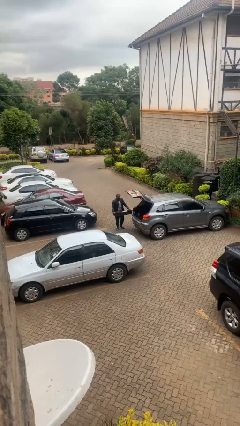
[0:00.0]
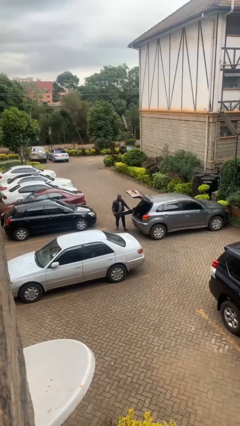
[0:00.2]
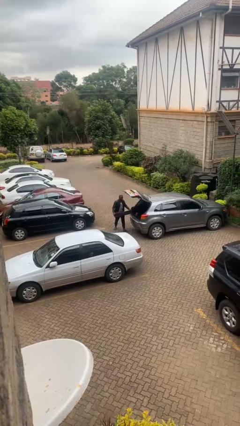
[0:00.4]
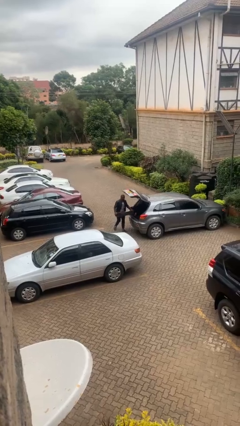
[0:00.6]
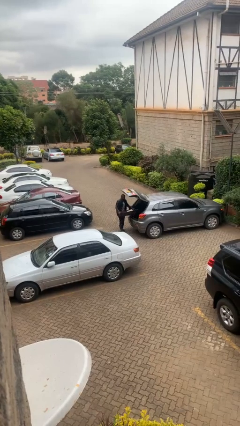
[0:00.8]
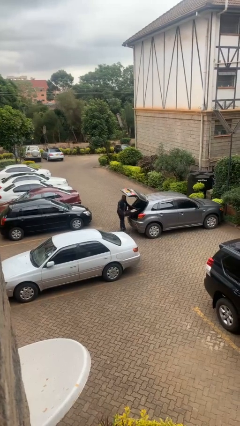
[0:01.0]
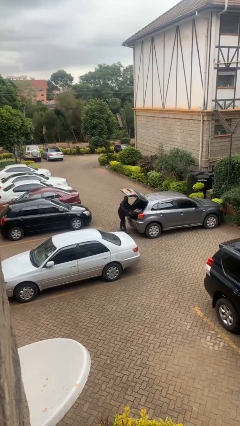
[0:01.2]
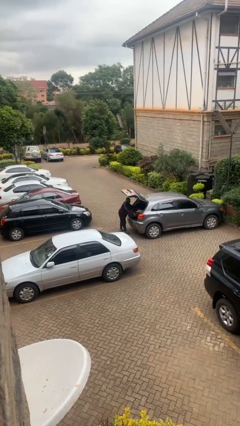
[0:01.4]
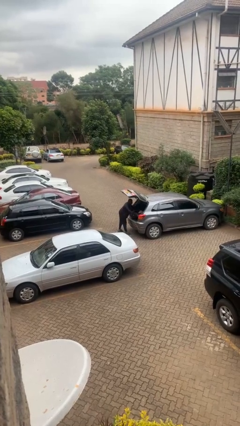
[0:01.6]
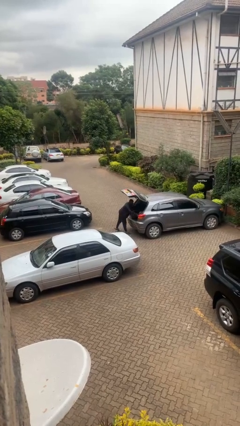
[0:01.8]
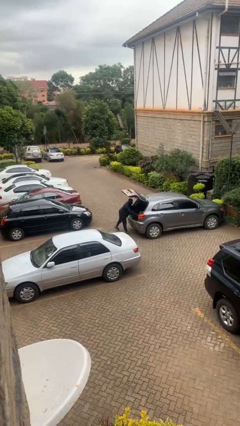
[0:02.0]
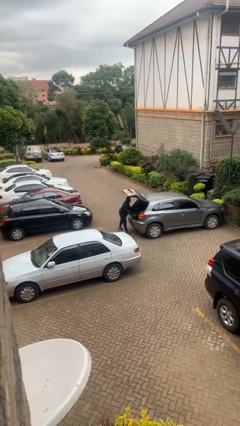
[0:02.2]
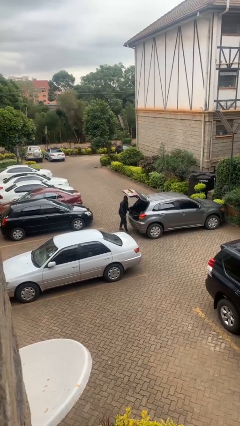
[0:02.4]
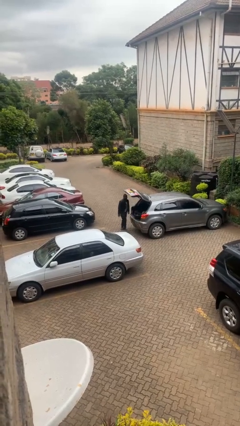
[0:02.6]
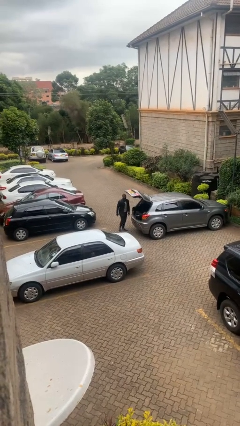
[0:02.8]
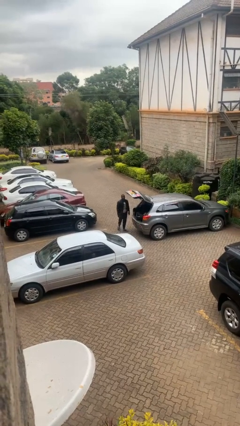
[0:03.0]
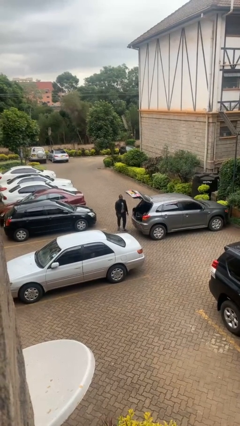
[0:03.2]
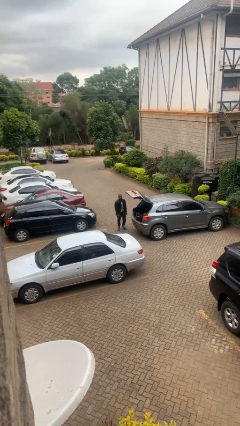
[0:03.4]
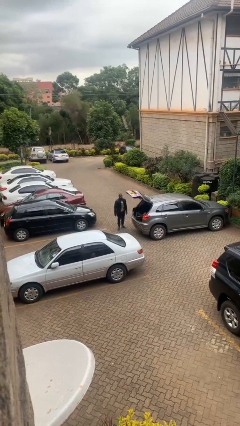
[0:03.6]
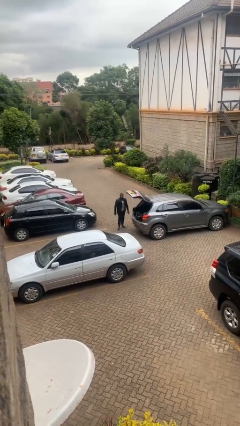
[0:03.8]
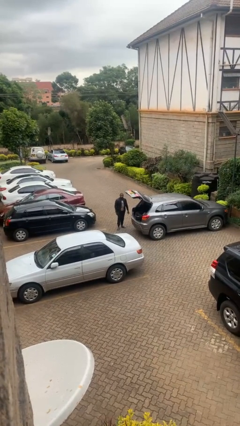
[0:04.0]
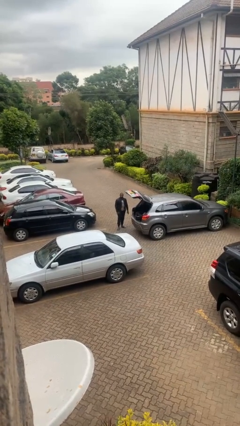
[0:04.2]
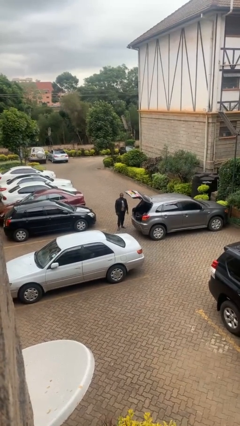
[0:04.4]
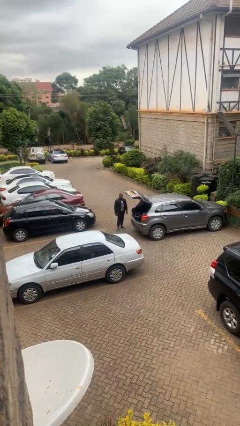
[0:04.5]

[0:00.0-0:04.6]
person loads car

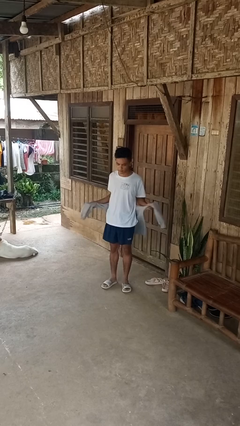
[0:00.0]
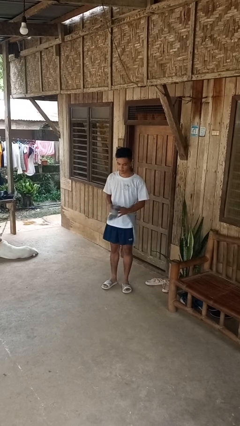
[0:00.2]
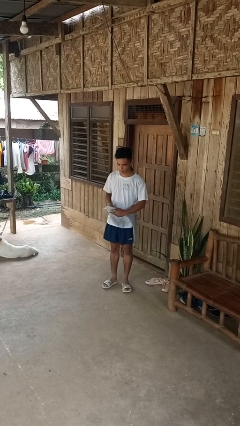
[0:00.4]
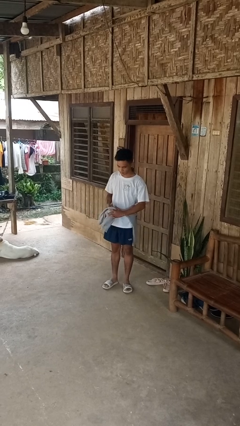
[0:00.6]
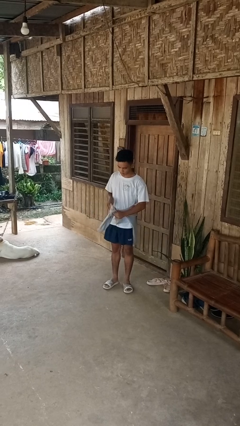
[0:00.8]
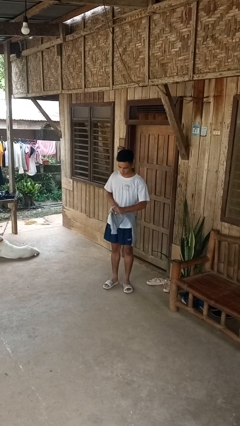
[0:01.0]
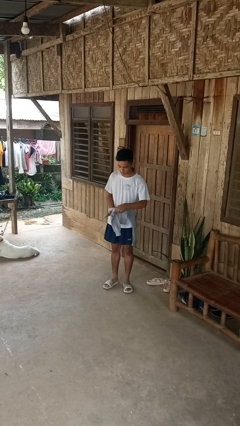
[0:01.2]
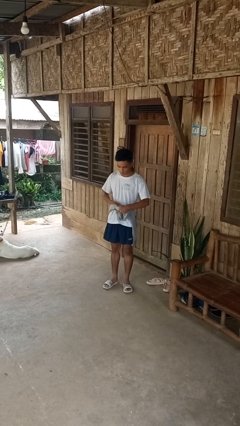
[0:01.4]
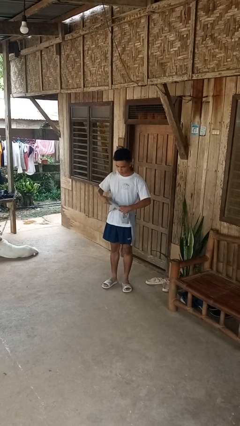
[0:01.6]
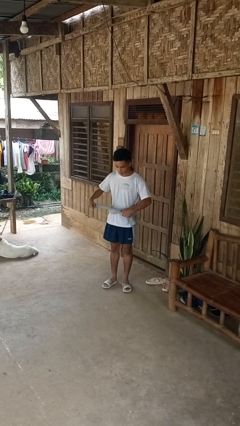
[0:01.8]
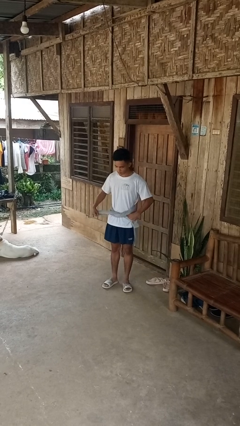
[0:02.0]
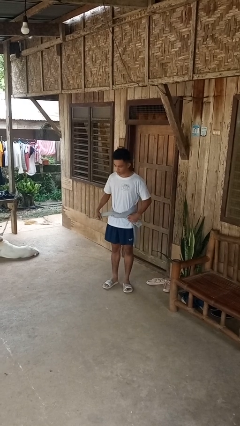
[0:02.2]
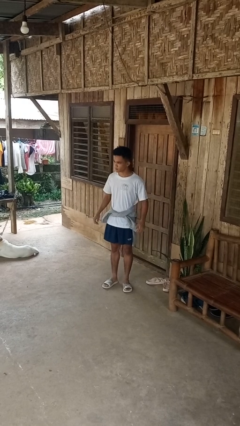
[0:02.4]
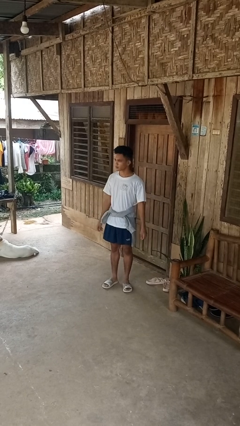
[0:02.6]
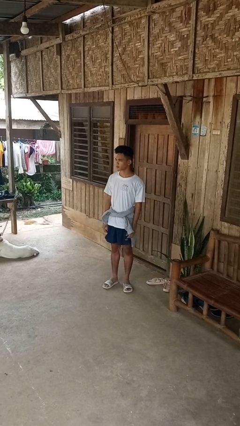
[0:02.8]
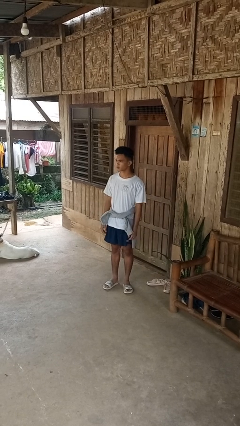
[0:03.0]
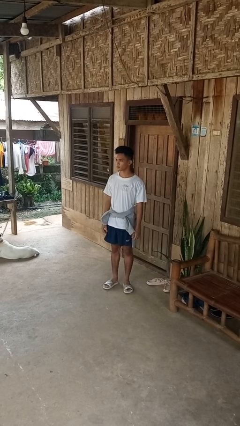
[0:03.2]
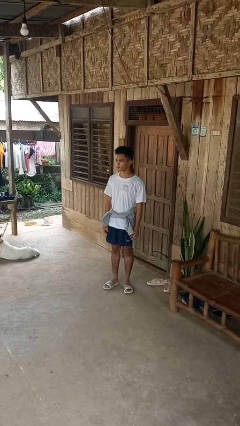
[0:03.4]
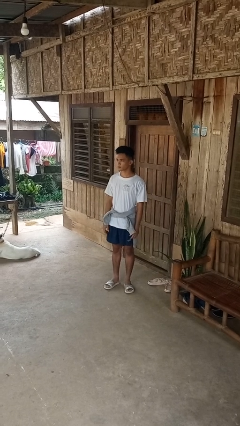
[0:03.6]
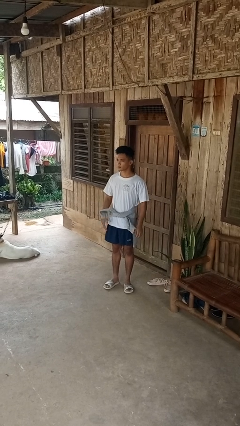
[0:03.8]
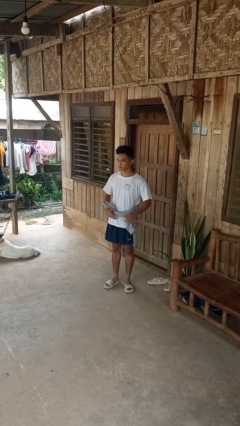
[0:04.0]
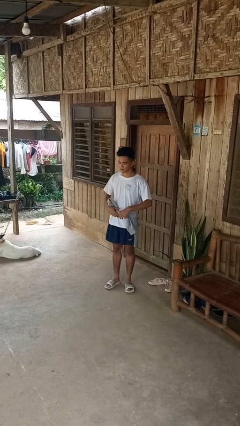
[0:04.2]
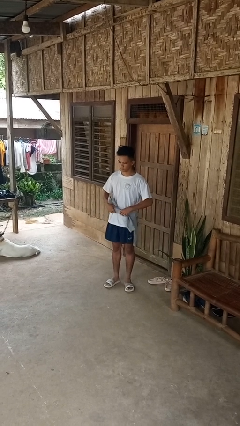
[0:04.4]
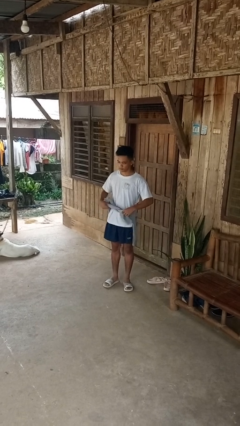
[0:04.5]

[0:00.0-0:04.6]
person ties jacket around waist

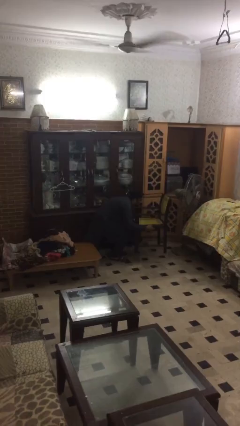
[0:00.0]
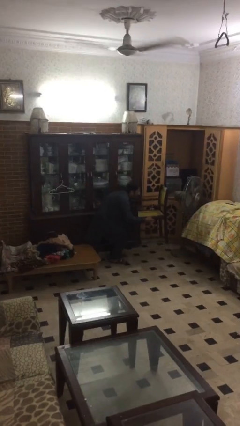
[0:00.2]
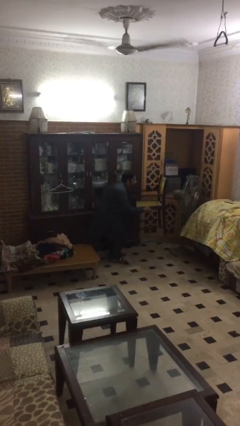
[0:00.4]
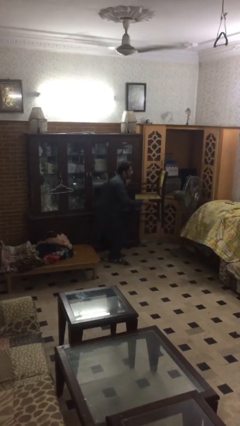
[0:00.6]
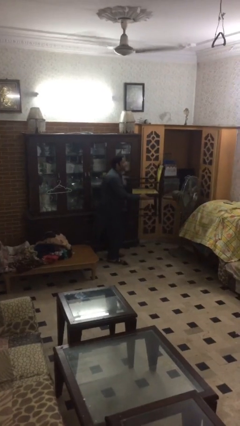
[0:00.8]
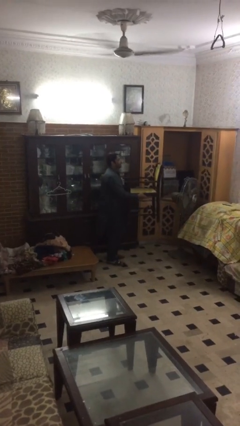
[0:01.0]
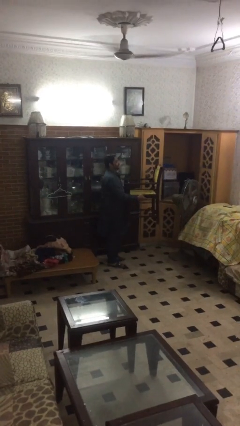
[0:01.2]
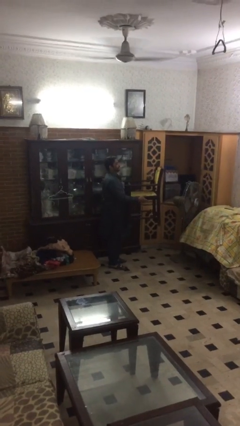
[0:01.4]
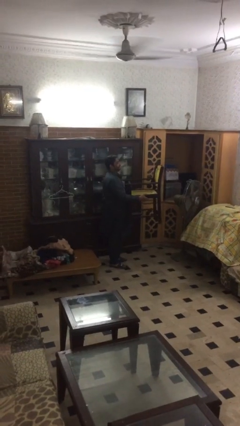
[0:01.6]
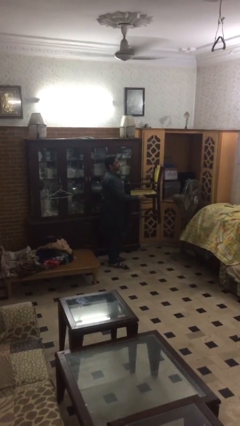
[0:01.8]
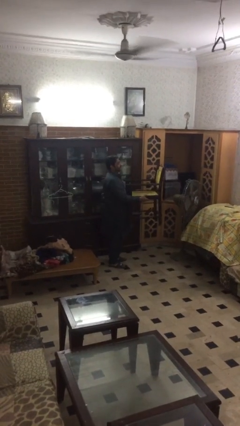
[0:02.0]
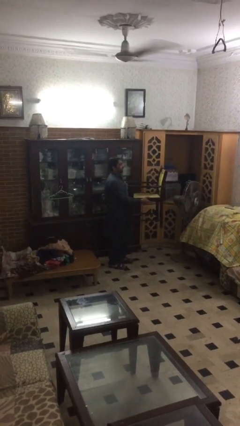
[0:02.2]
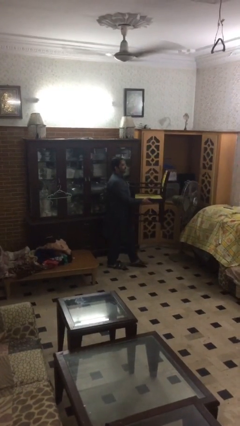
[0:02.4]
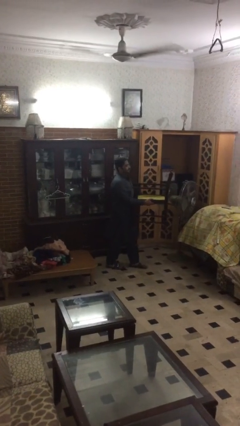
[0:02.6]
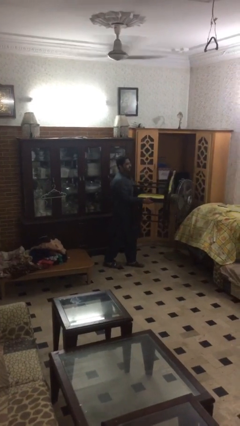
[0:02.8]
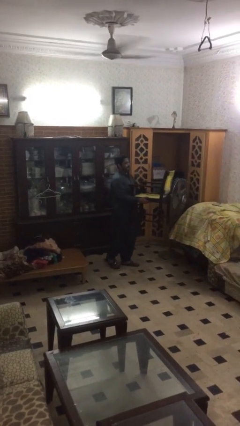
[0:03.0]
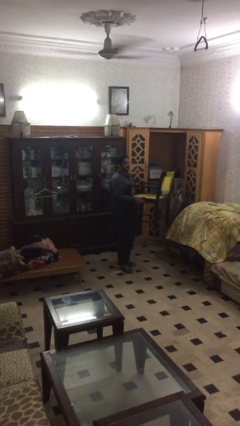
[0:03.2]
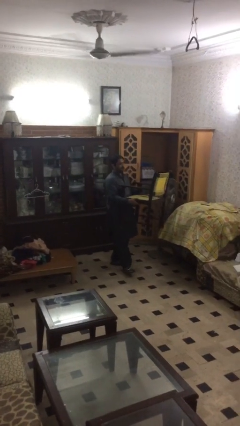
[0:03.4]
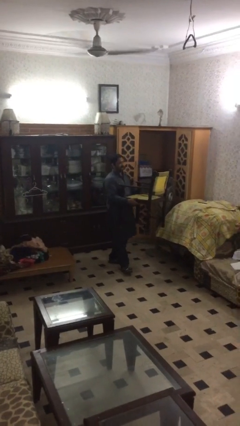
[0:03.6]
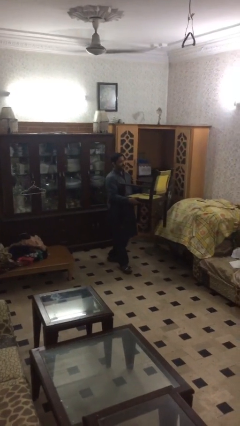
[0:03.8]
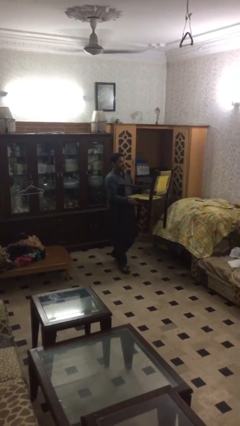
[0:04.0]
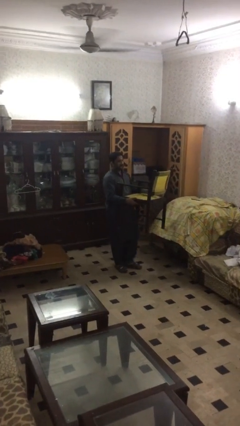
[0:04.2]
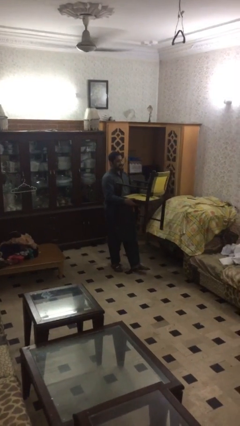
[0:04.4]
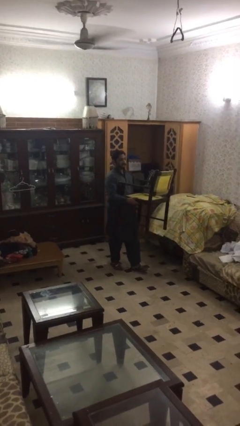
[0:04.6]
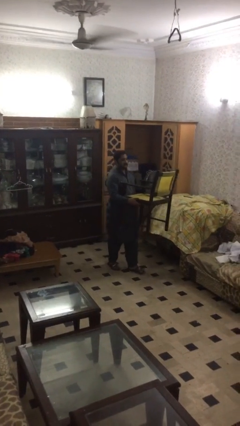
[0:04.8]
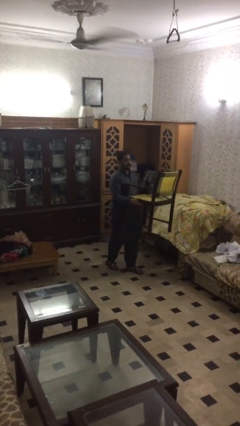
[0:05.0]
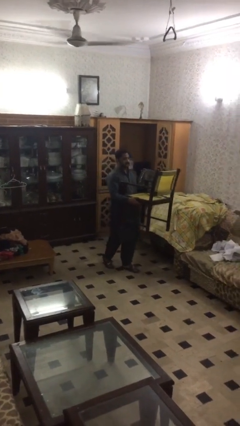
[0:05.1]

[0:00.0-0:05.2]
person carries heavy object

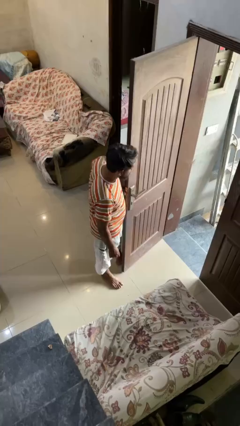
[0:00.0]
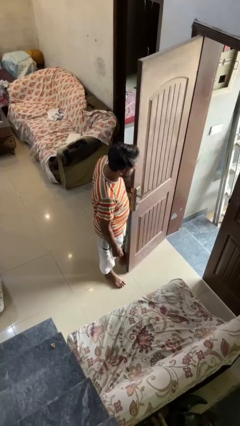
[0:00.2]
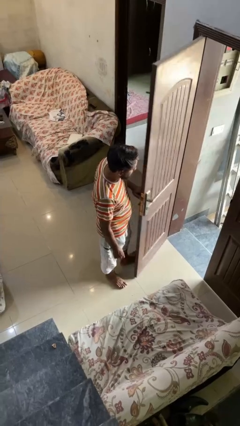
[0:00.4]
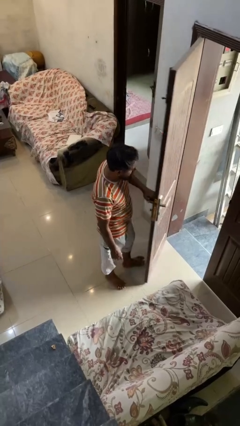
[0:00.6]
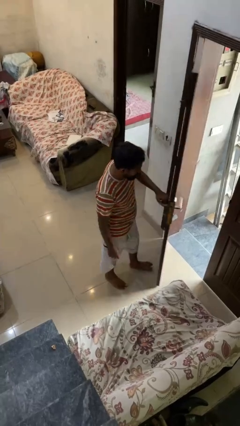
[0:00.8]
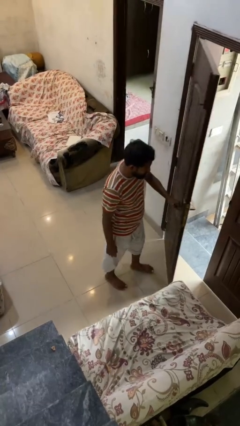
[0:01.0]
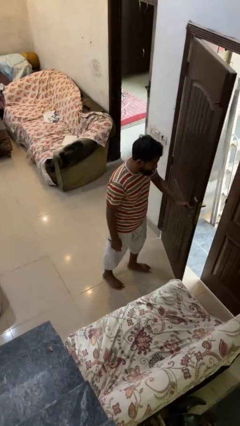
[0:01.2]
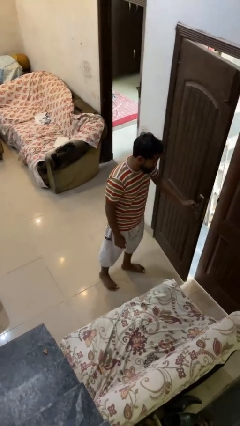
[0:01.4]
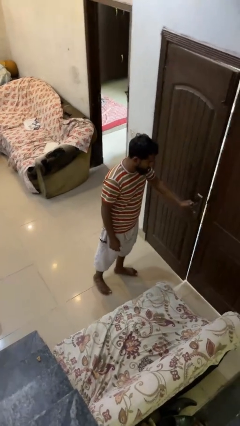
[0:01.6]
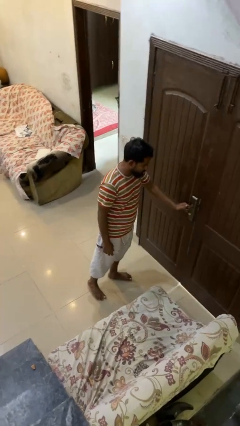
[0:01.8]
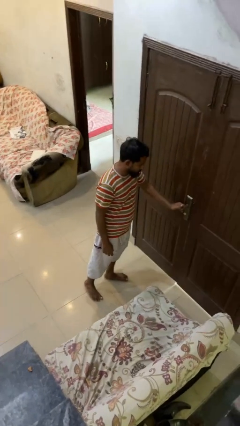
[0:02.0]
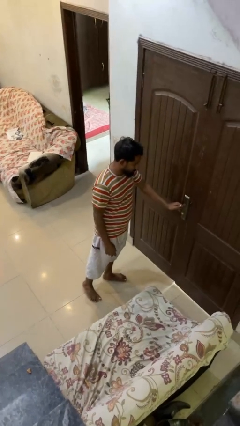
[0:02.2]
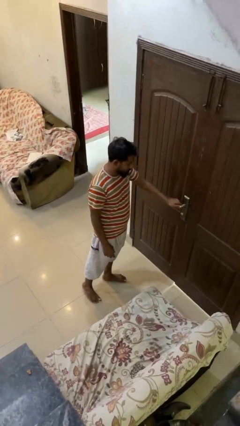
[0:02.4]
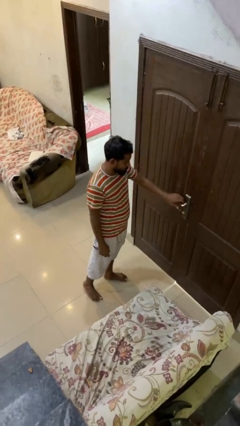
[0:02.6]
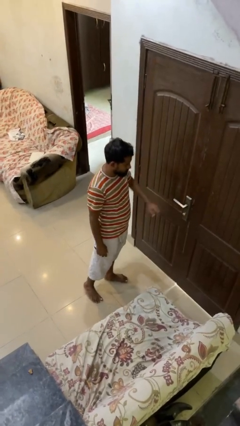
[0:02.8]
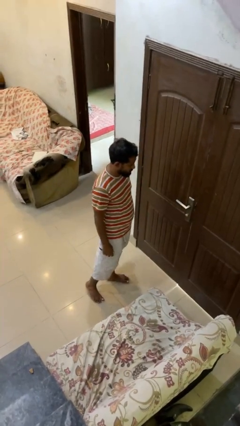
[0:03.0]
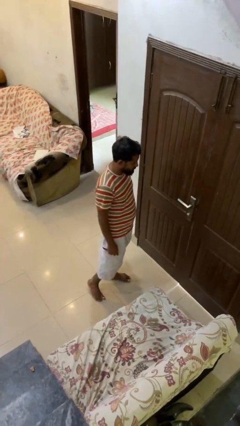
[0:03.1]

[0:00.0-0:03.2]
person closes facility door

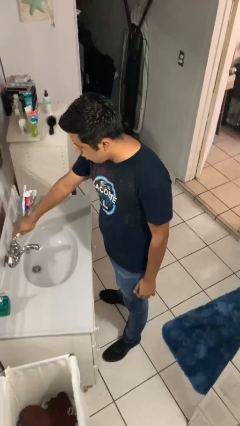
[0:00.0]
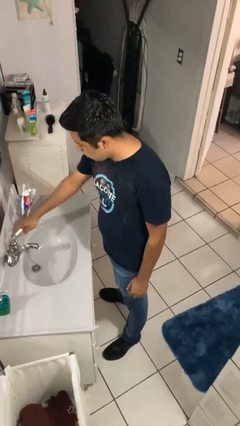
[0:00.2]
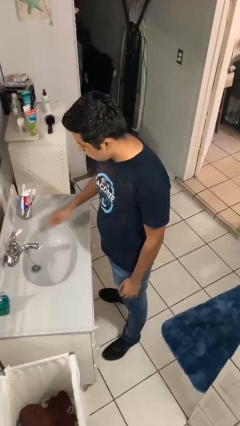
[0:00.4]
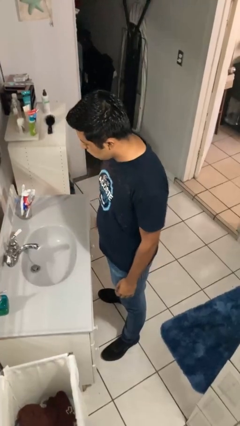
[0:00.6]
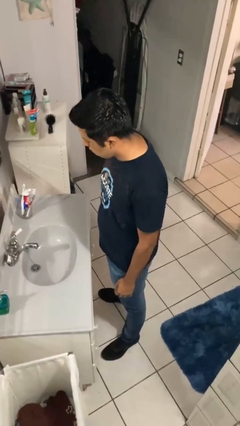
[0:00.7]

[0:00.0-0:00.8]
person turns on faucet
